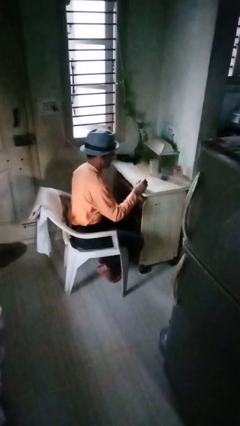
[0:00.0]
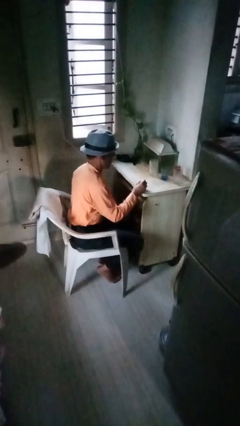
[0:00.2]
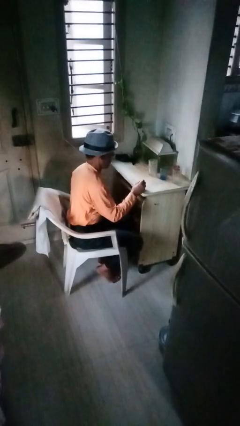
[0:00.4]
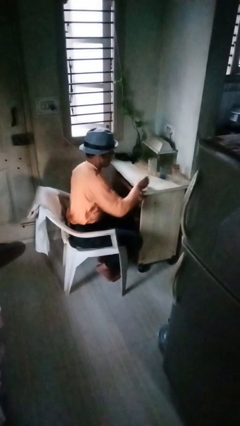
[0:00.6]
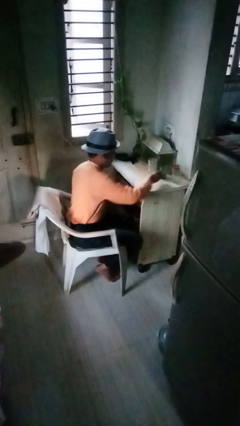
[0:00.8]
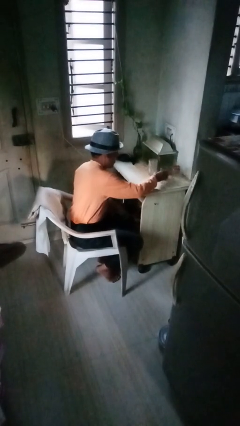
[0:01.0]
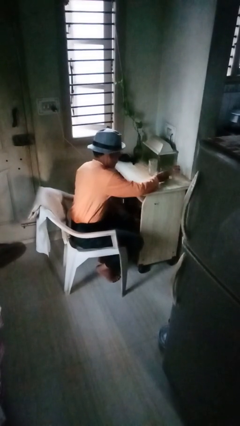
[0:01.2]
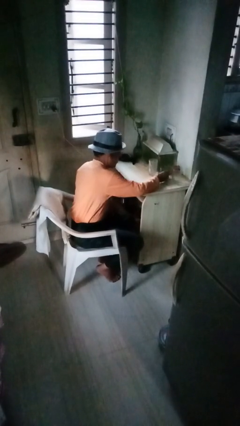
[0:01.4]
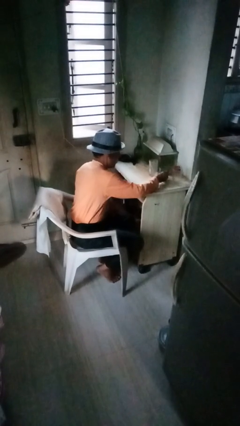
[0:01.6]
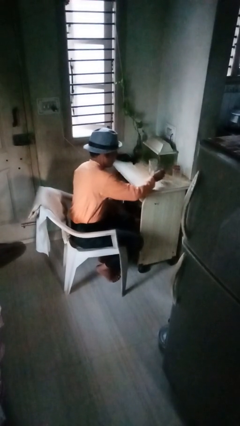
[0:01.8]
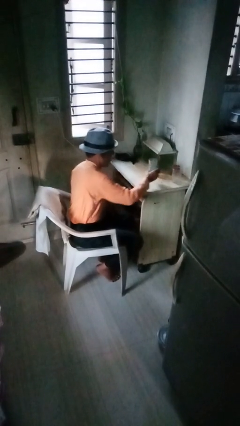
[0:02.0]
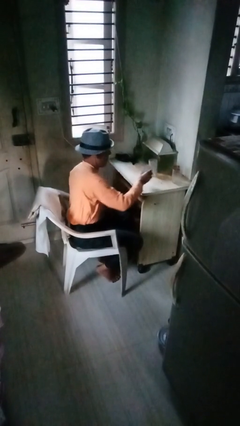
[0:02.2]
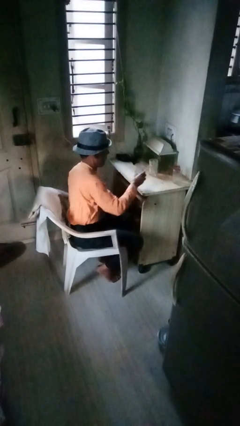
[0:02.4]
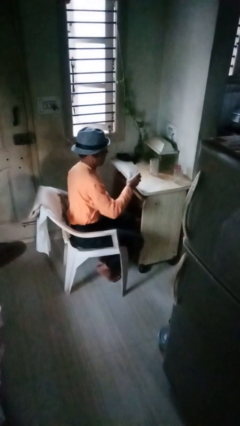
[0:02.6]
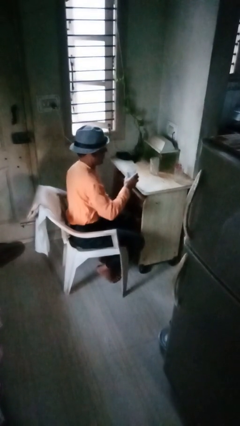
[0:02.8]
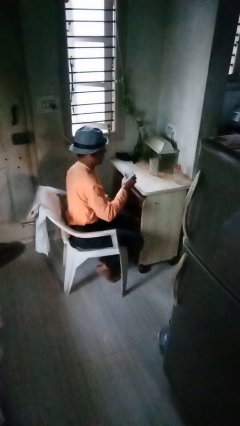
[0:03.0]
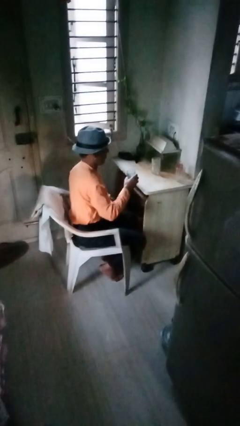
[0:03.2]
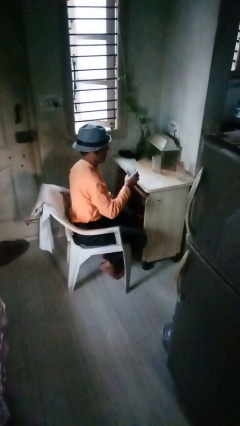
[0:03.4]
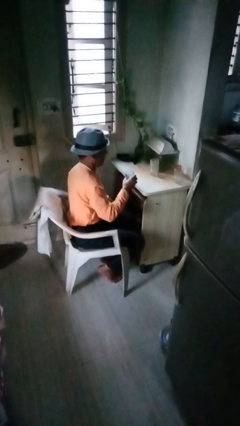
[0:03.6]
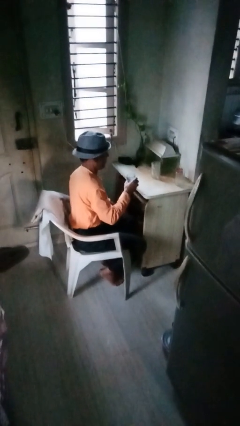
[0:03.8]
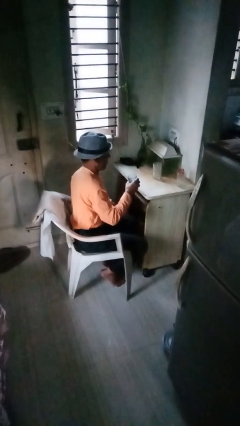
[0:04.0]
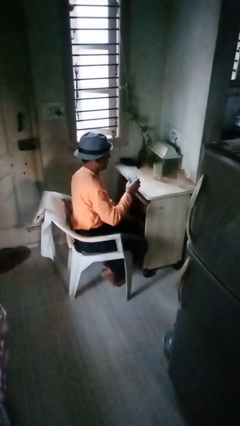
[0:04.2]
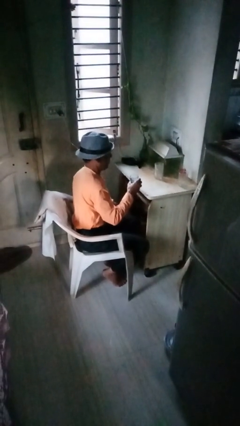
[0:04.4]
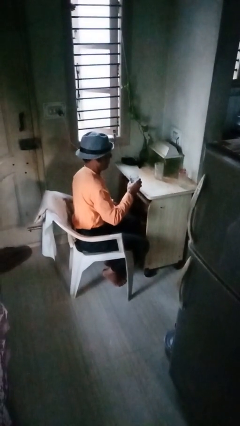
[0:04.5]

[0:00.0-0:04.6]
person picks up object from table

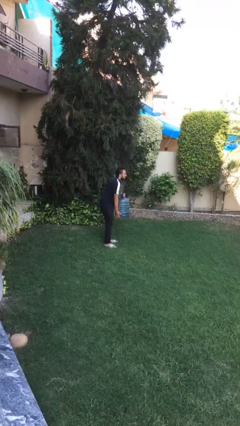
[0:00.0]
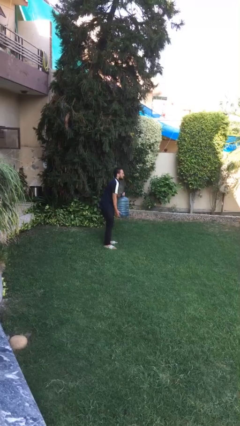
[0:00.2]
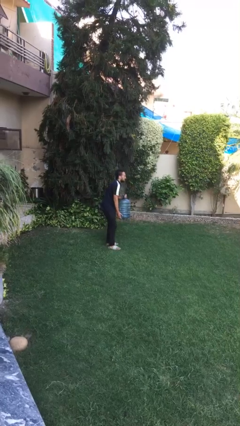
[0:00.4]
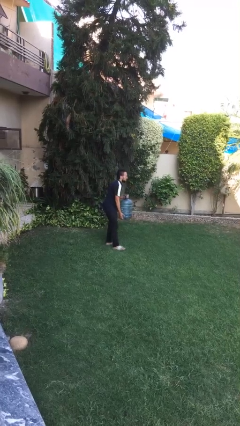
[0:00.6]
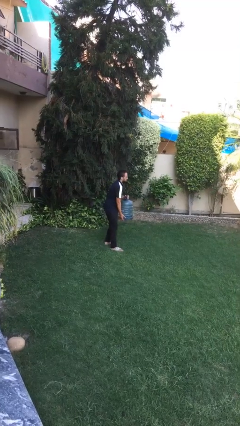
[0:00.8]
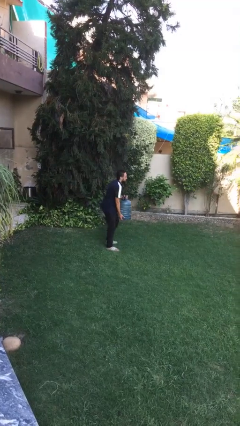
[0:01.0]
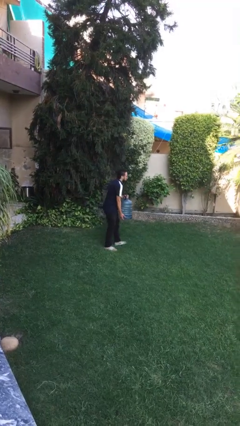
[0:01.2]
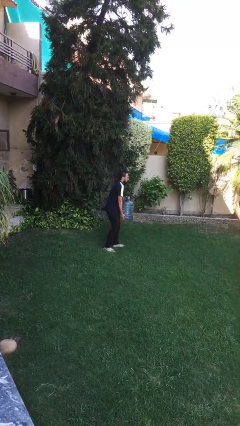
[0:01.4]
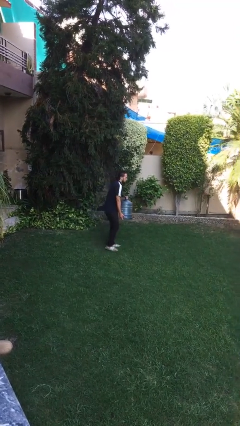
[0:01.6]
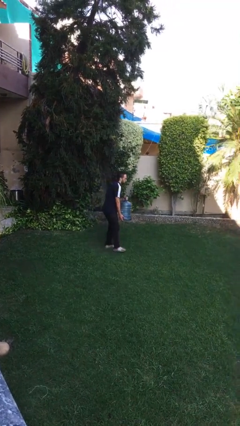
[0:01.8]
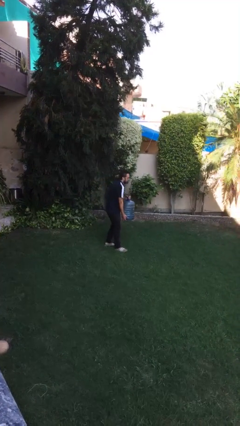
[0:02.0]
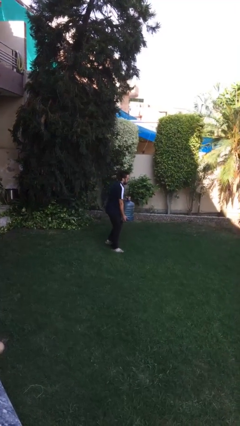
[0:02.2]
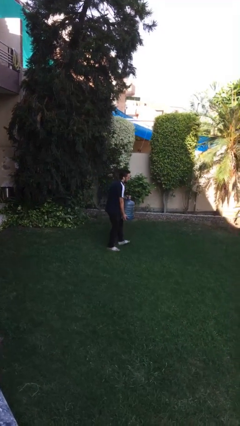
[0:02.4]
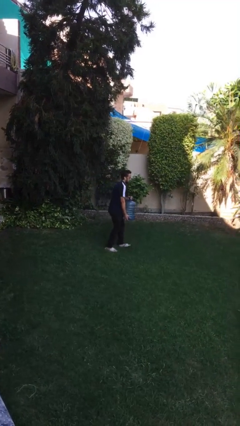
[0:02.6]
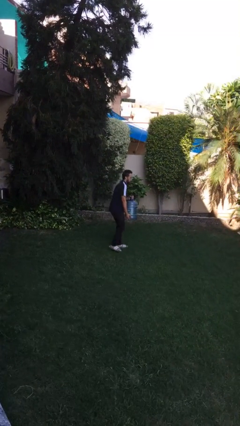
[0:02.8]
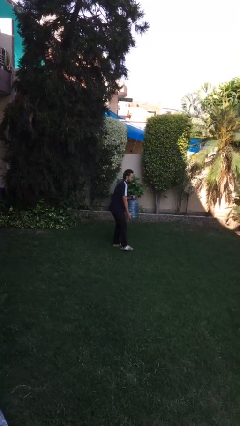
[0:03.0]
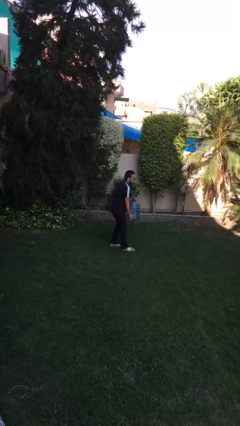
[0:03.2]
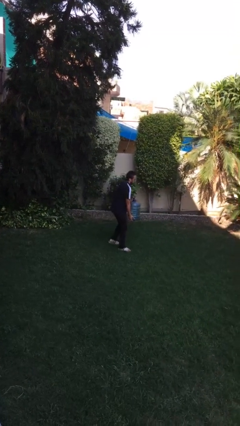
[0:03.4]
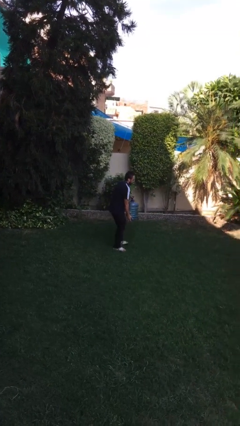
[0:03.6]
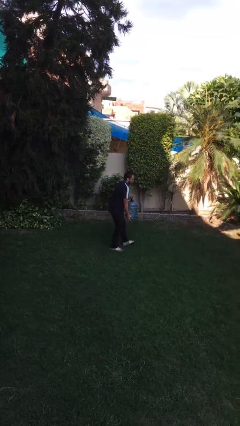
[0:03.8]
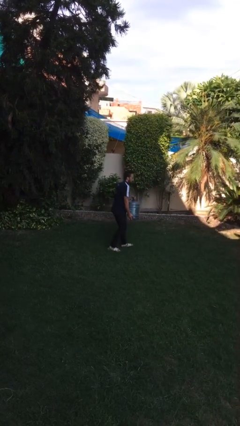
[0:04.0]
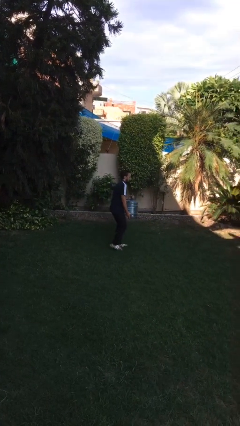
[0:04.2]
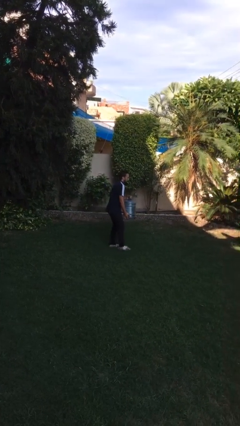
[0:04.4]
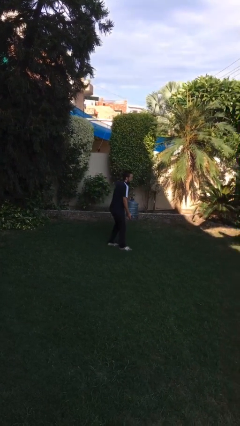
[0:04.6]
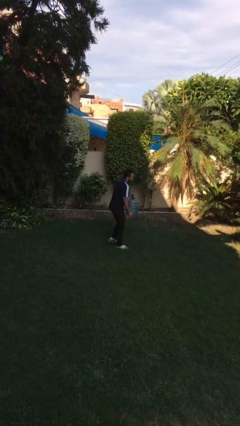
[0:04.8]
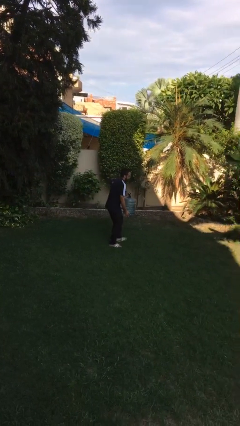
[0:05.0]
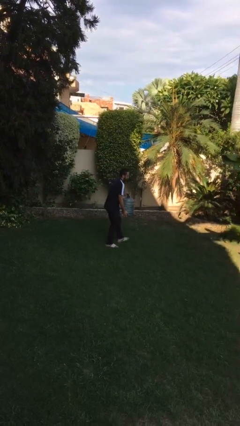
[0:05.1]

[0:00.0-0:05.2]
person carries heavy object

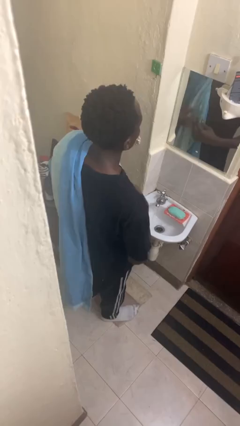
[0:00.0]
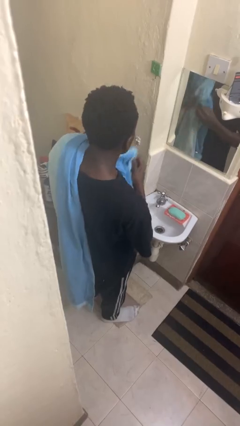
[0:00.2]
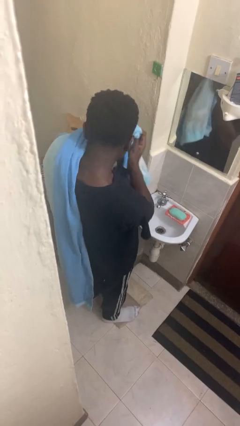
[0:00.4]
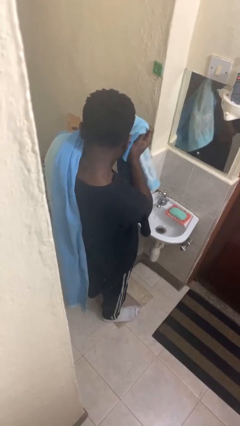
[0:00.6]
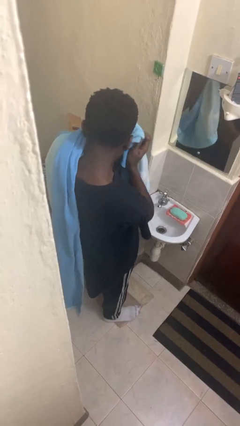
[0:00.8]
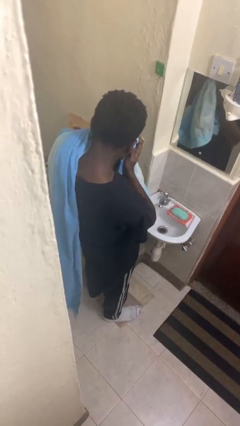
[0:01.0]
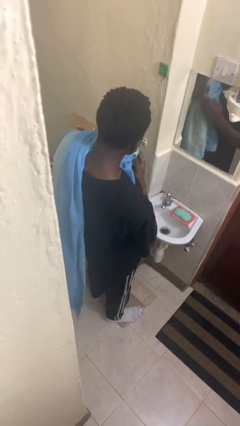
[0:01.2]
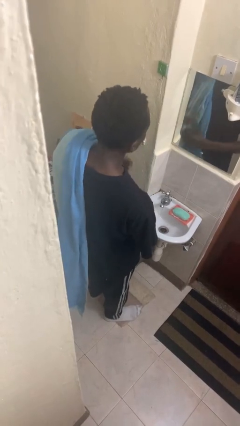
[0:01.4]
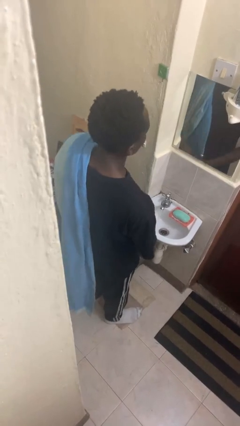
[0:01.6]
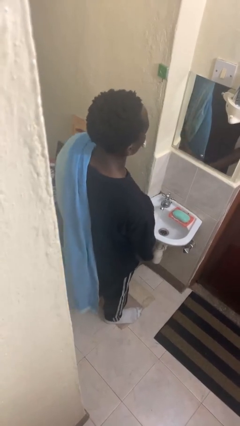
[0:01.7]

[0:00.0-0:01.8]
person dries face with towel

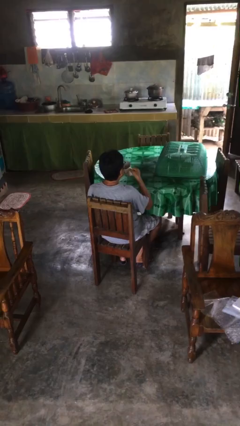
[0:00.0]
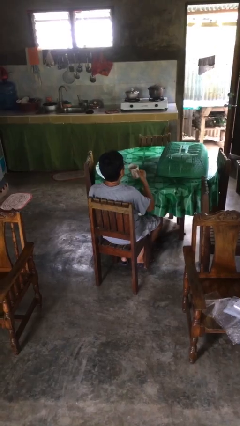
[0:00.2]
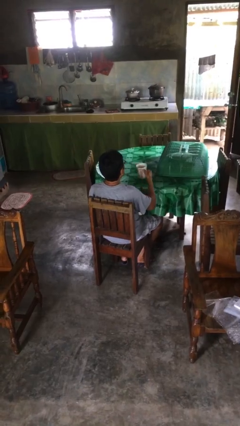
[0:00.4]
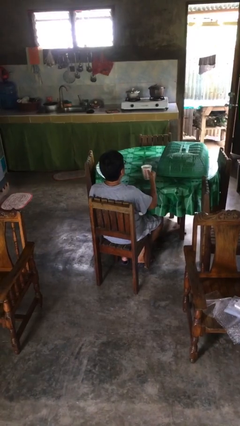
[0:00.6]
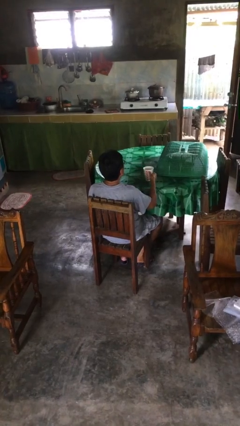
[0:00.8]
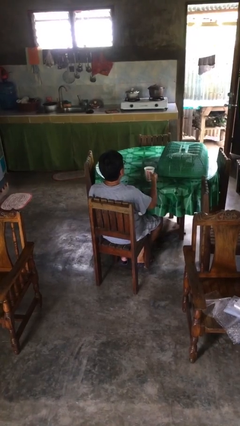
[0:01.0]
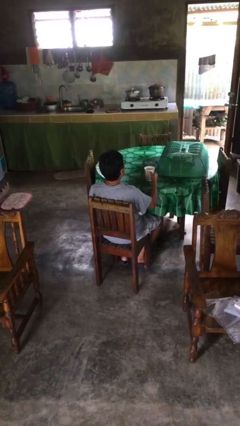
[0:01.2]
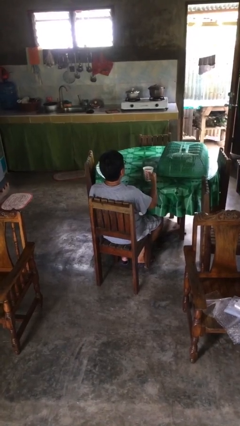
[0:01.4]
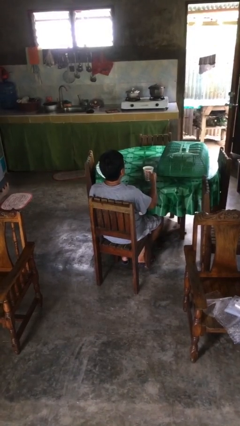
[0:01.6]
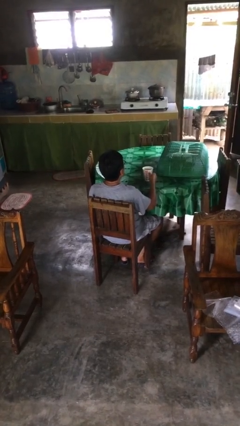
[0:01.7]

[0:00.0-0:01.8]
person puts down object on table

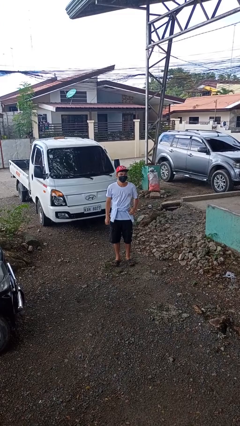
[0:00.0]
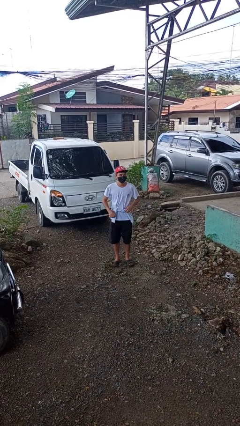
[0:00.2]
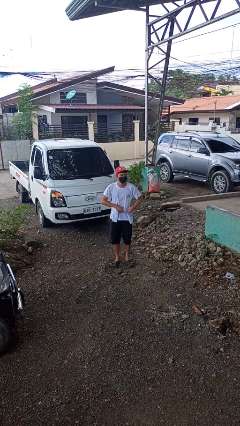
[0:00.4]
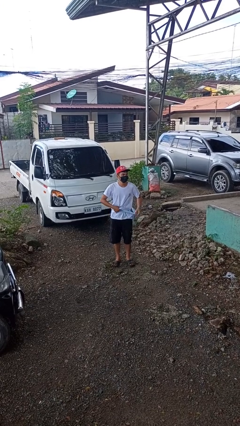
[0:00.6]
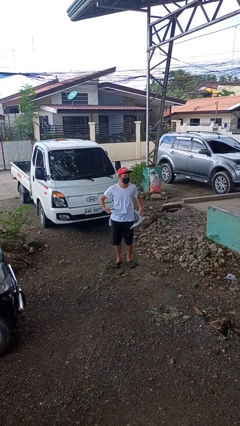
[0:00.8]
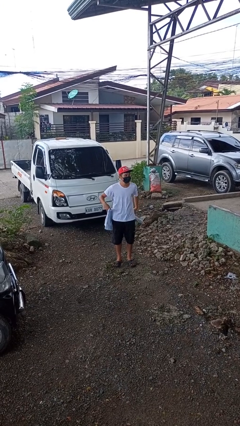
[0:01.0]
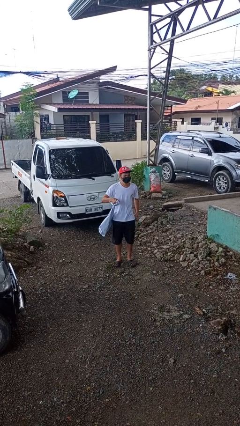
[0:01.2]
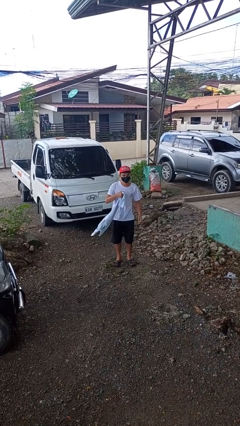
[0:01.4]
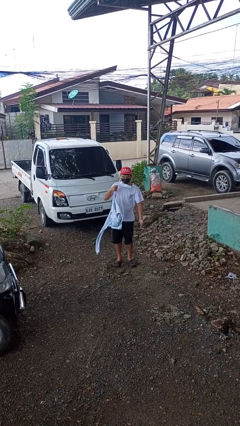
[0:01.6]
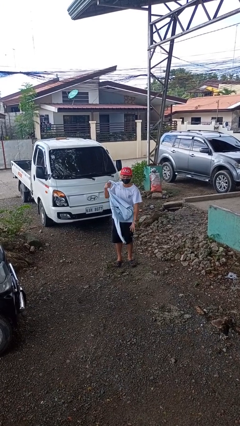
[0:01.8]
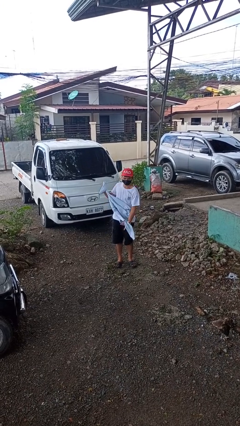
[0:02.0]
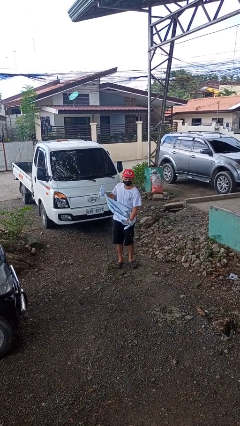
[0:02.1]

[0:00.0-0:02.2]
person unties jacket around waist

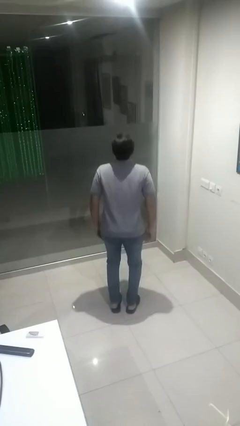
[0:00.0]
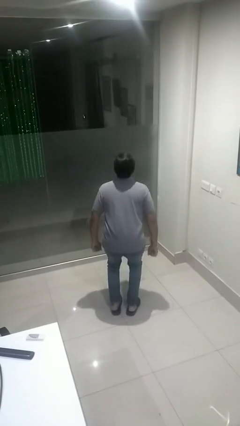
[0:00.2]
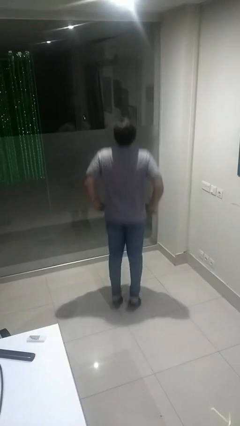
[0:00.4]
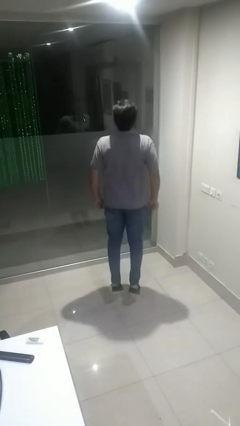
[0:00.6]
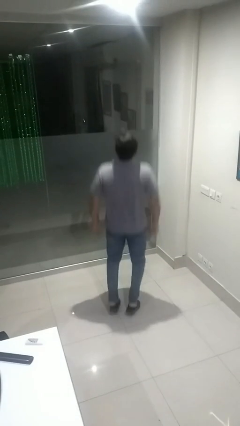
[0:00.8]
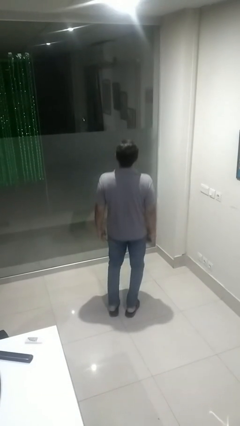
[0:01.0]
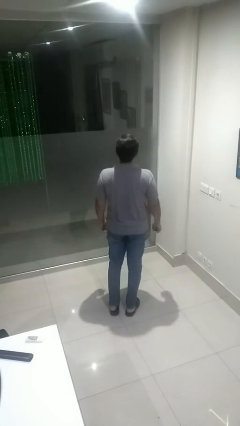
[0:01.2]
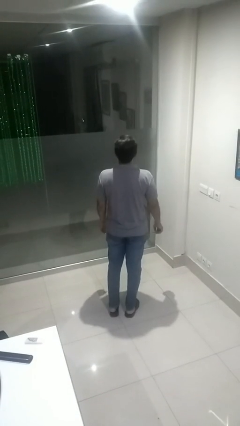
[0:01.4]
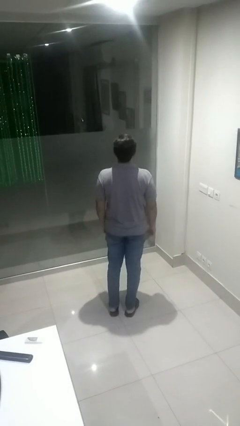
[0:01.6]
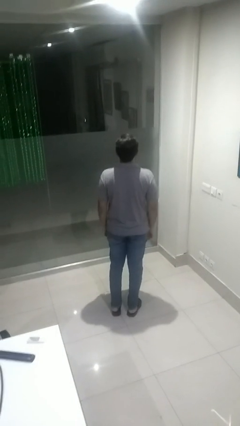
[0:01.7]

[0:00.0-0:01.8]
person jumps
